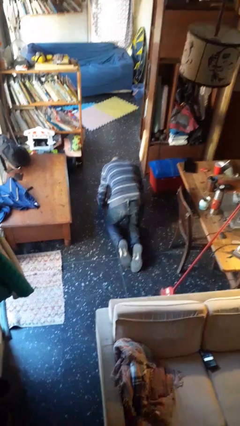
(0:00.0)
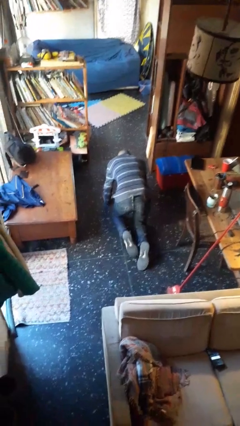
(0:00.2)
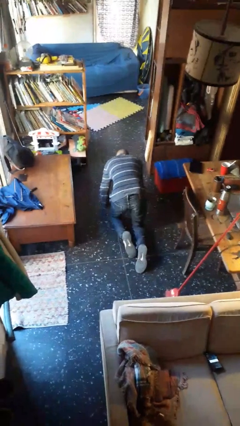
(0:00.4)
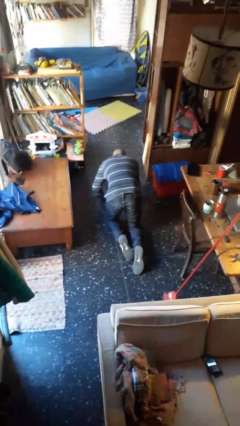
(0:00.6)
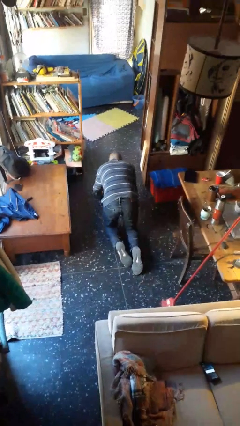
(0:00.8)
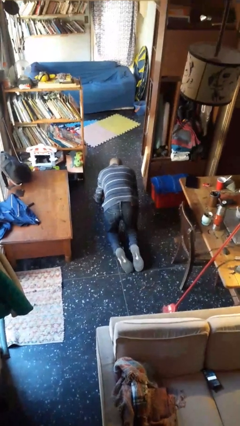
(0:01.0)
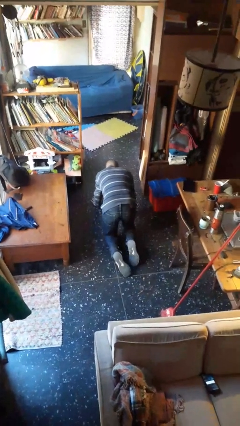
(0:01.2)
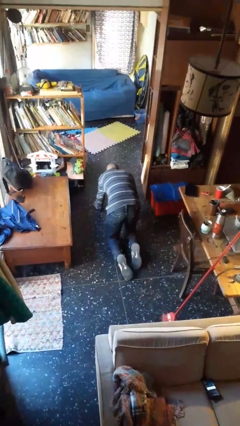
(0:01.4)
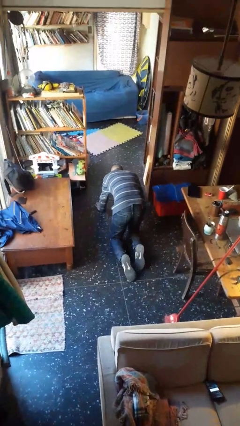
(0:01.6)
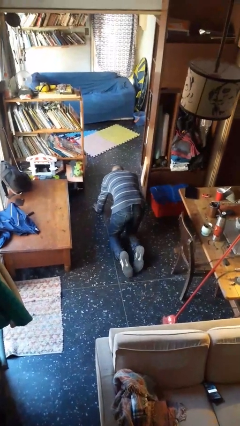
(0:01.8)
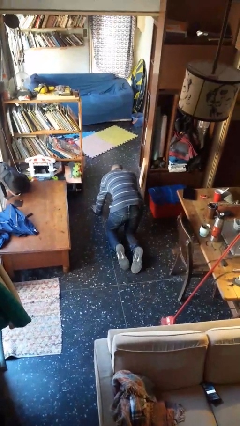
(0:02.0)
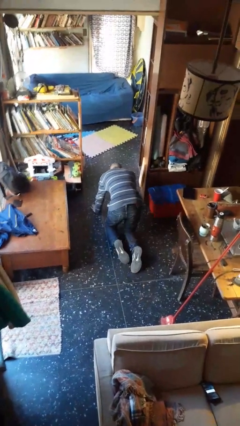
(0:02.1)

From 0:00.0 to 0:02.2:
person crawls

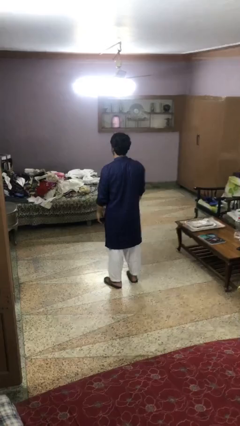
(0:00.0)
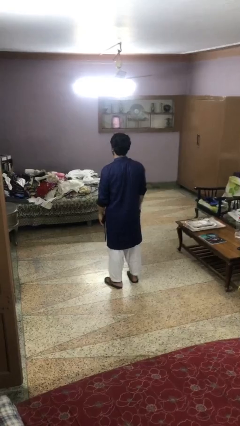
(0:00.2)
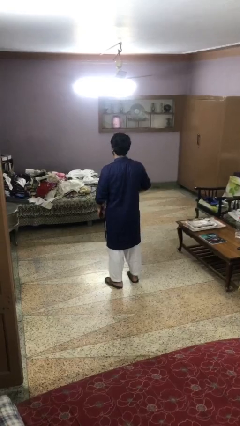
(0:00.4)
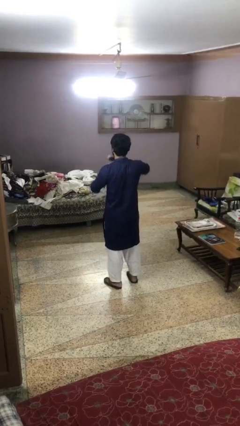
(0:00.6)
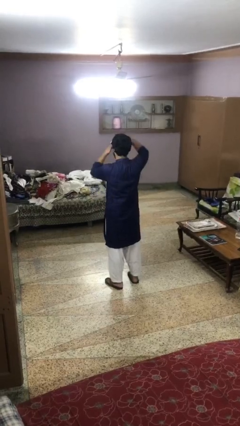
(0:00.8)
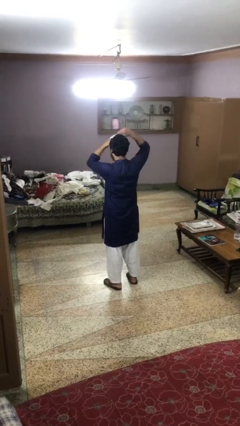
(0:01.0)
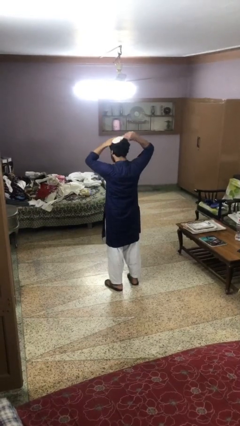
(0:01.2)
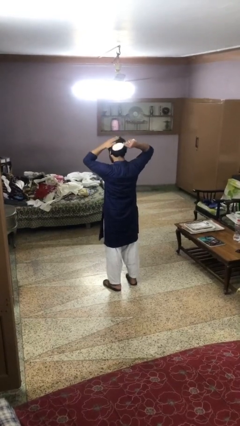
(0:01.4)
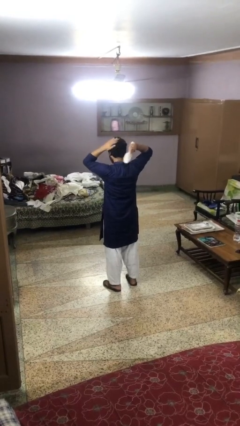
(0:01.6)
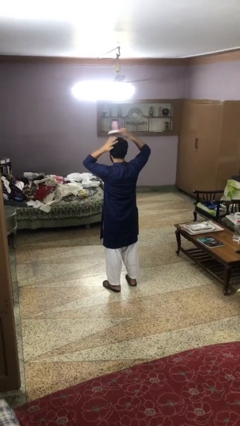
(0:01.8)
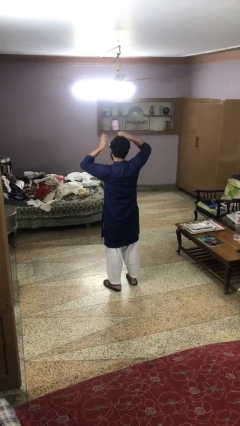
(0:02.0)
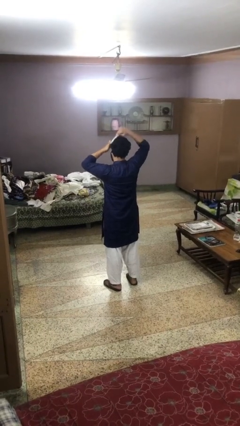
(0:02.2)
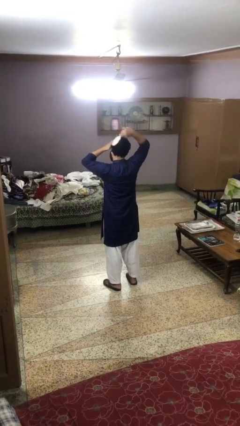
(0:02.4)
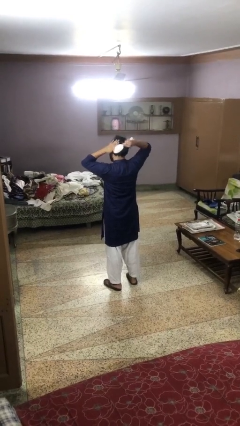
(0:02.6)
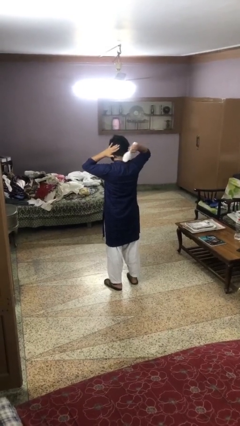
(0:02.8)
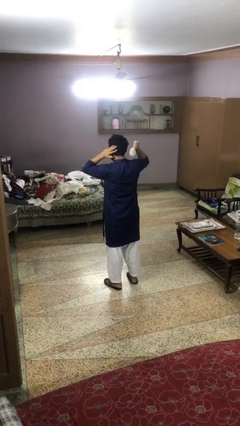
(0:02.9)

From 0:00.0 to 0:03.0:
person brushes hair

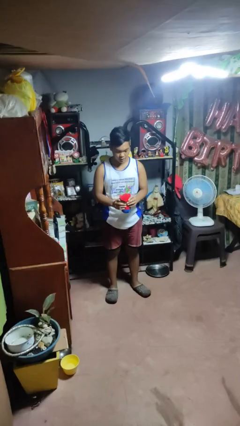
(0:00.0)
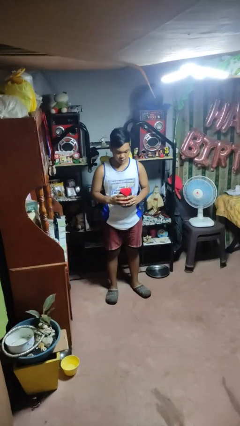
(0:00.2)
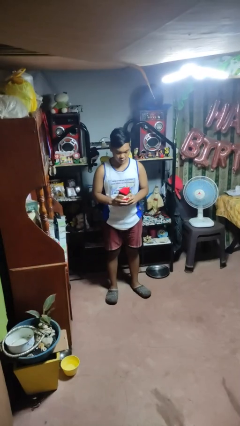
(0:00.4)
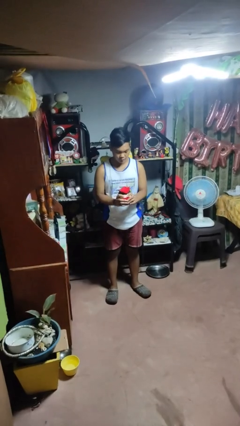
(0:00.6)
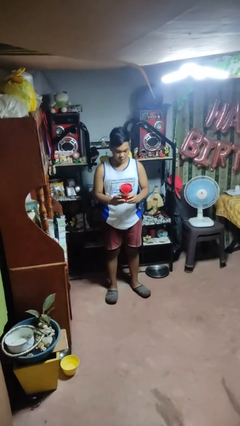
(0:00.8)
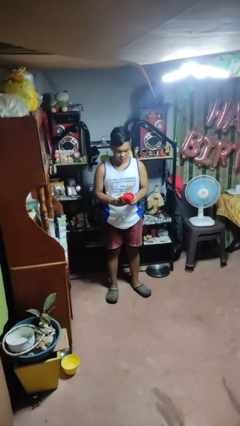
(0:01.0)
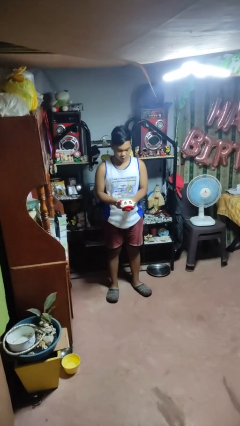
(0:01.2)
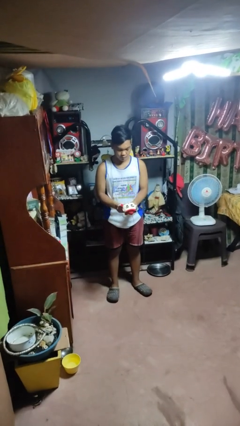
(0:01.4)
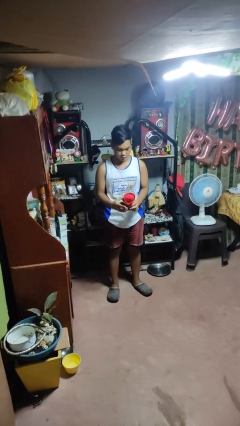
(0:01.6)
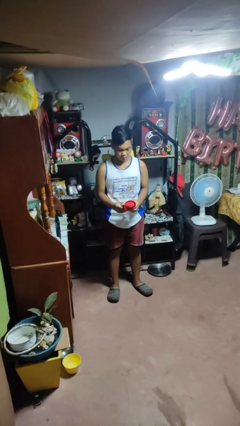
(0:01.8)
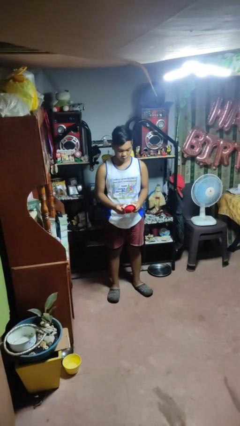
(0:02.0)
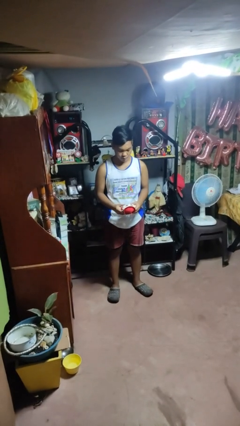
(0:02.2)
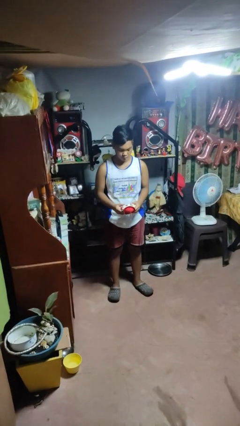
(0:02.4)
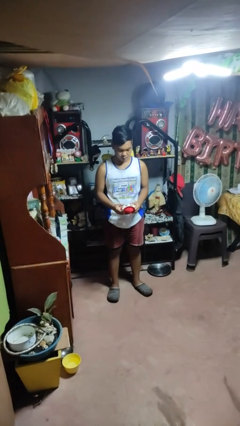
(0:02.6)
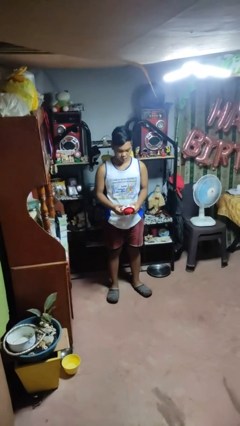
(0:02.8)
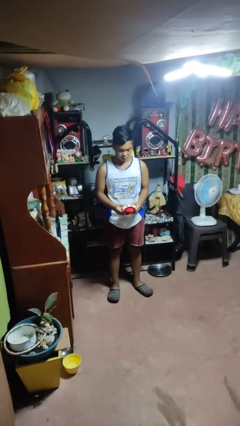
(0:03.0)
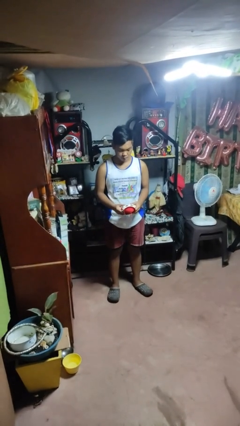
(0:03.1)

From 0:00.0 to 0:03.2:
person squeezes object

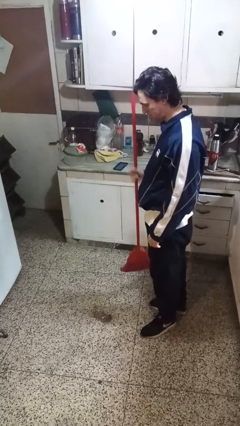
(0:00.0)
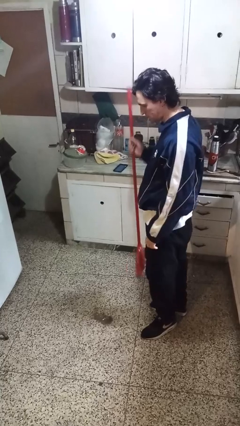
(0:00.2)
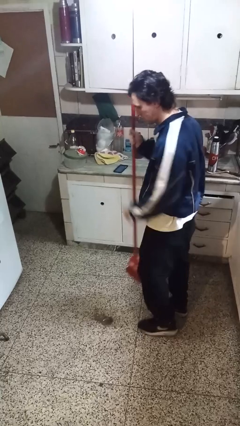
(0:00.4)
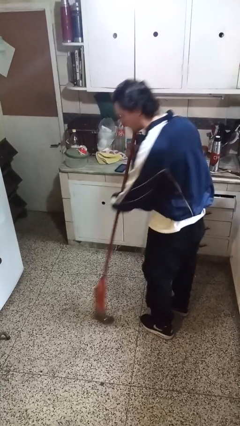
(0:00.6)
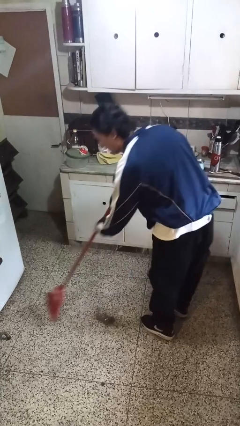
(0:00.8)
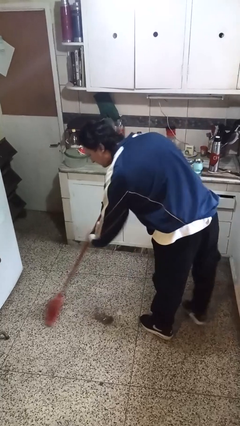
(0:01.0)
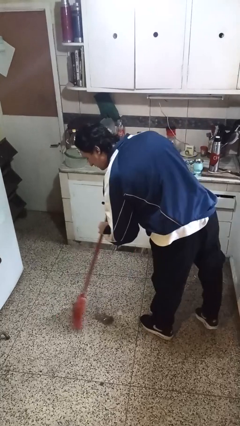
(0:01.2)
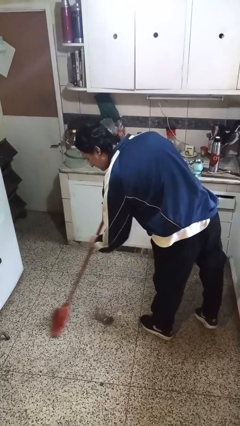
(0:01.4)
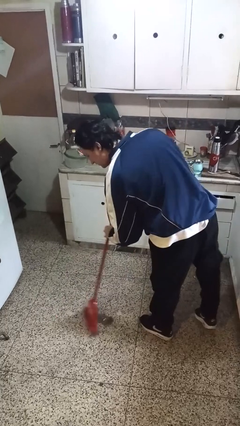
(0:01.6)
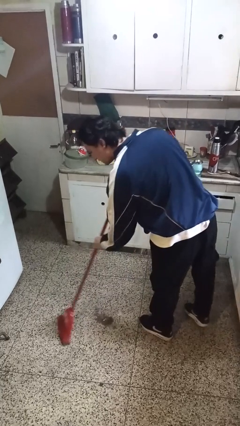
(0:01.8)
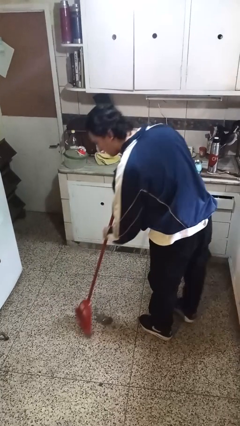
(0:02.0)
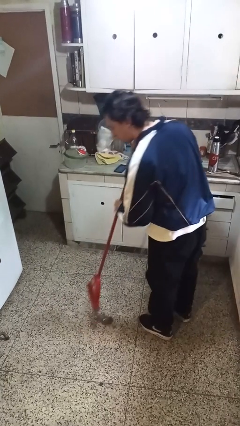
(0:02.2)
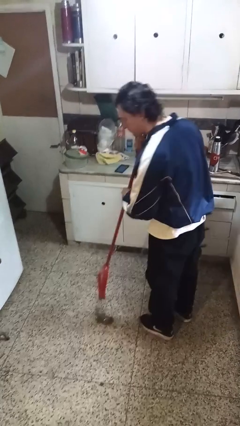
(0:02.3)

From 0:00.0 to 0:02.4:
person sweeps floor

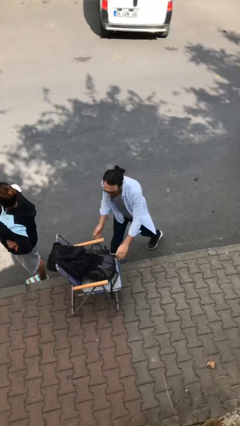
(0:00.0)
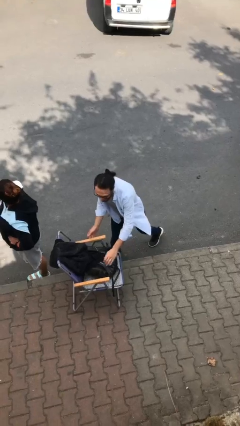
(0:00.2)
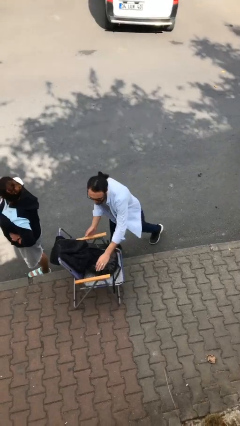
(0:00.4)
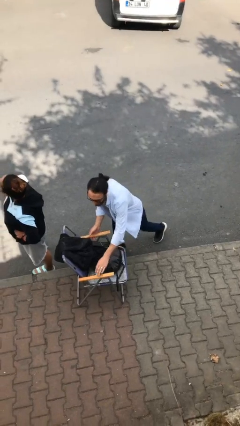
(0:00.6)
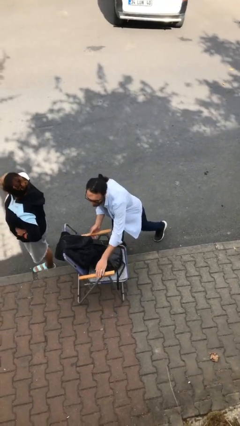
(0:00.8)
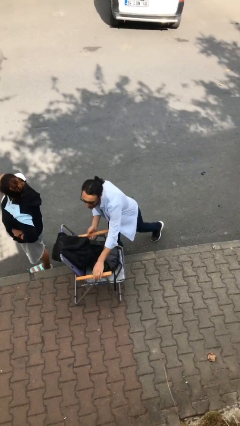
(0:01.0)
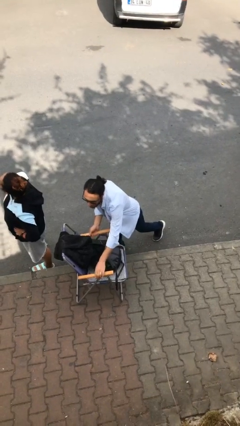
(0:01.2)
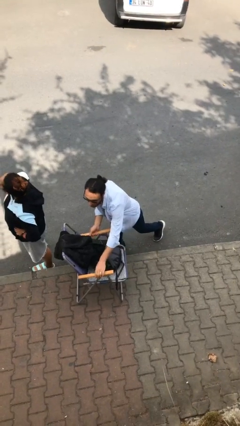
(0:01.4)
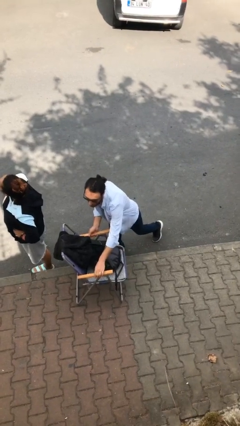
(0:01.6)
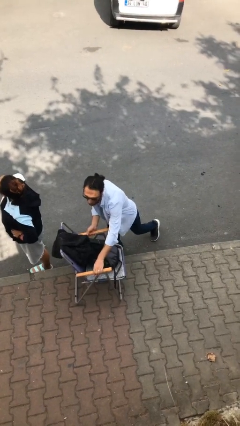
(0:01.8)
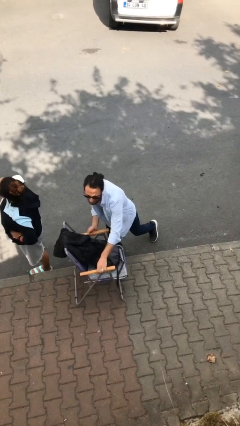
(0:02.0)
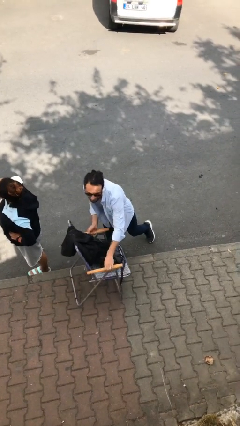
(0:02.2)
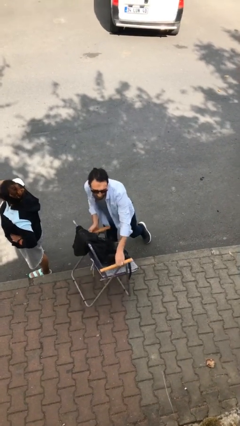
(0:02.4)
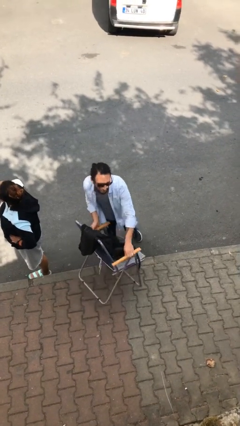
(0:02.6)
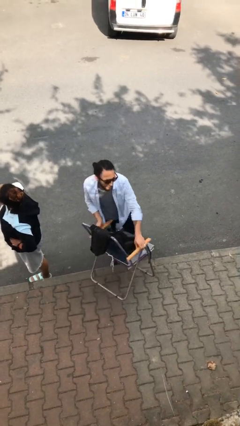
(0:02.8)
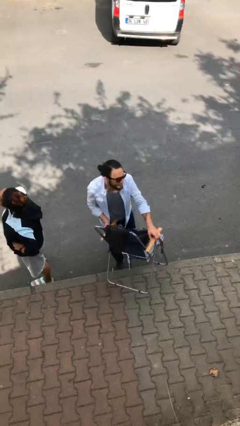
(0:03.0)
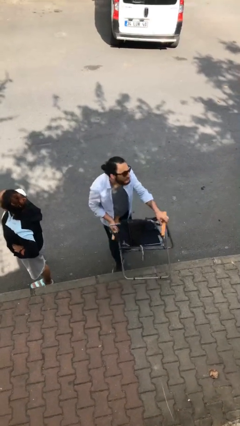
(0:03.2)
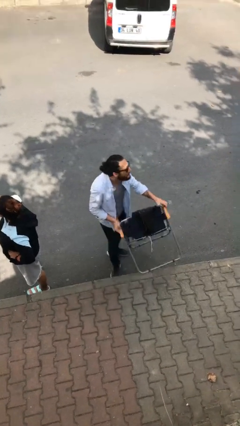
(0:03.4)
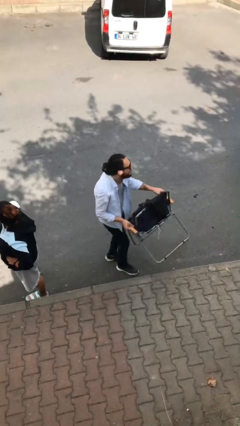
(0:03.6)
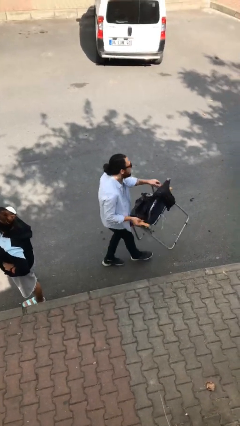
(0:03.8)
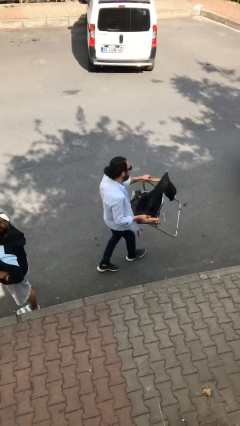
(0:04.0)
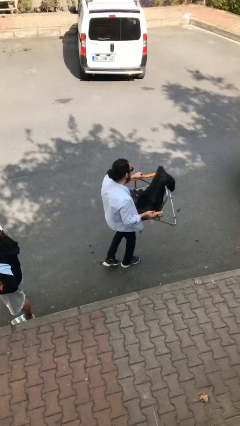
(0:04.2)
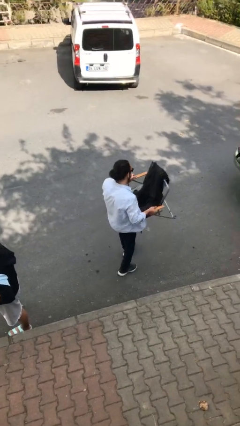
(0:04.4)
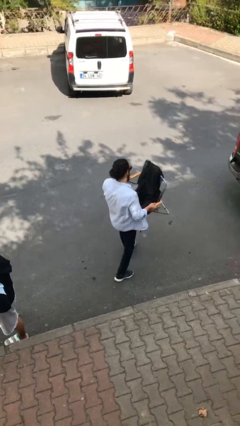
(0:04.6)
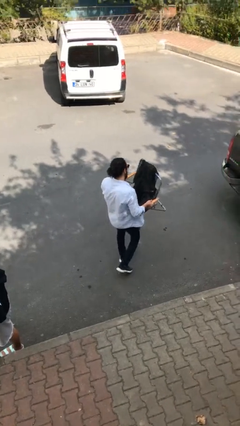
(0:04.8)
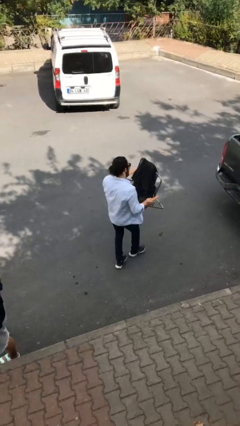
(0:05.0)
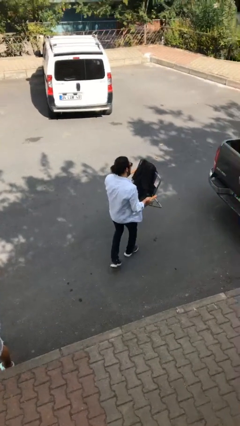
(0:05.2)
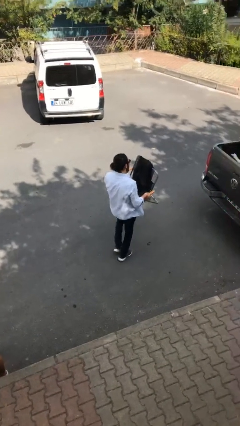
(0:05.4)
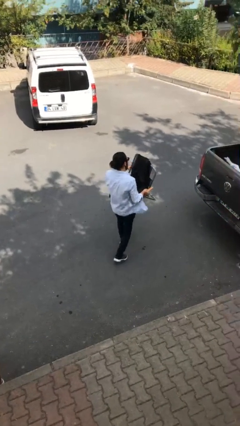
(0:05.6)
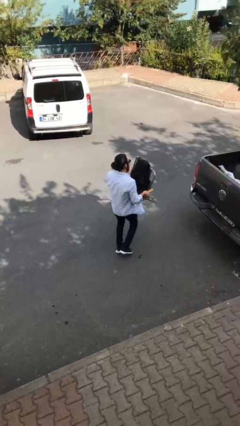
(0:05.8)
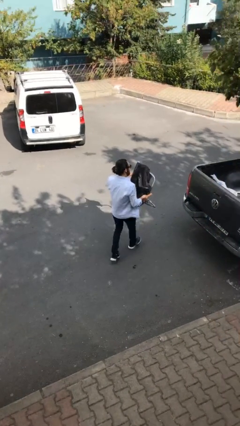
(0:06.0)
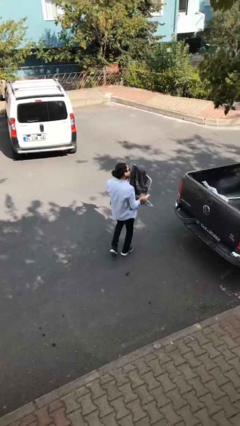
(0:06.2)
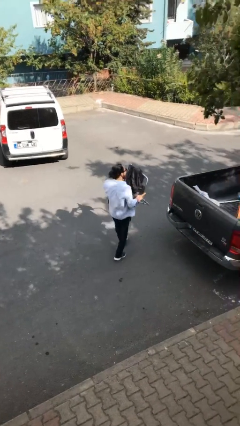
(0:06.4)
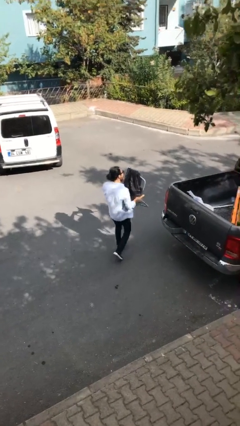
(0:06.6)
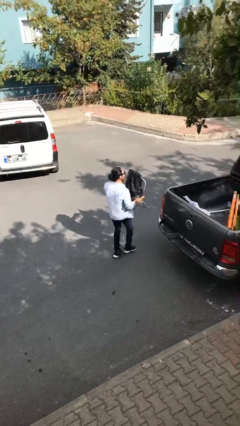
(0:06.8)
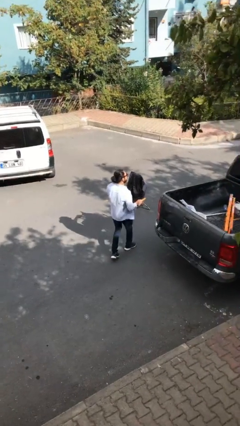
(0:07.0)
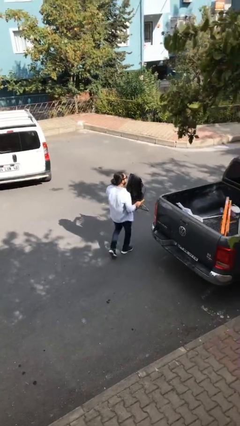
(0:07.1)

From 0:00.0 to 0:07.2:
person steals object from person
